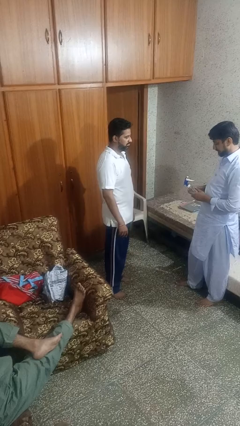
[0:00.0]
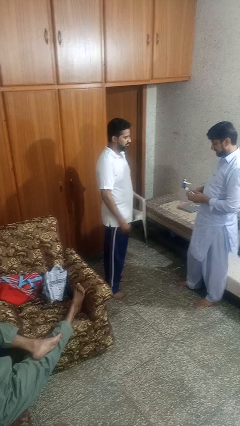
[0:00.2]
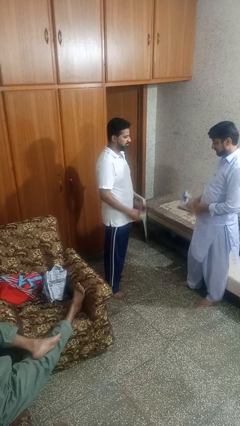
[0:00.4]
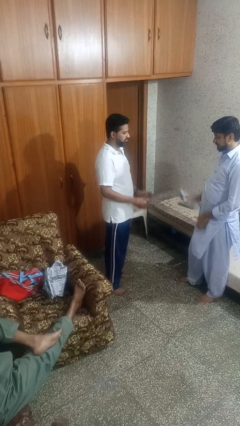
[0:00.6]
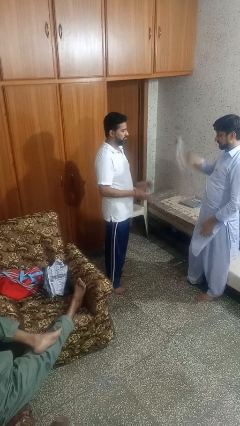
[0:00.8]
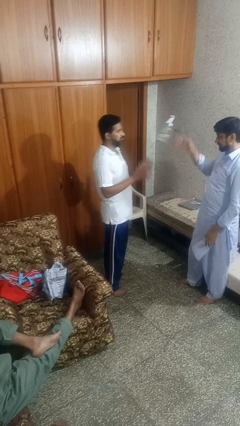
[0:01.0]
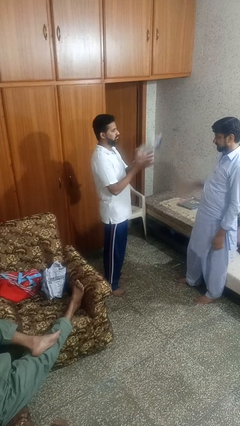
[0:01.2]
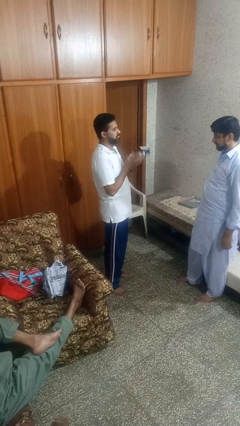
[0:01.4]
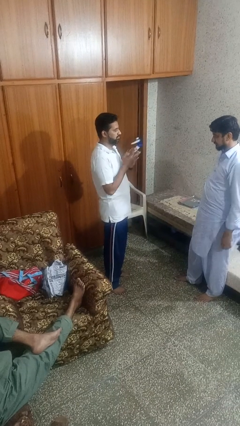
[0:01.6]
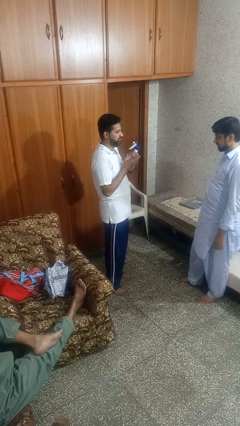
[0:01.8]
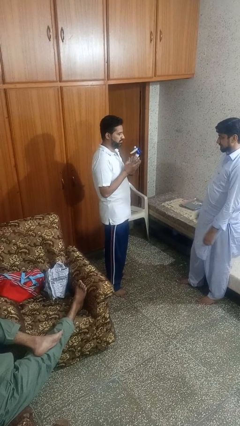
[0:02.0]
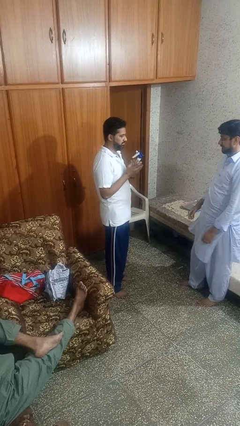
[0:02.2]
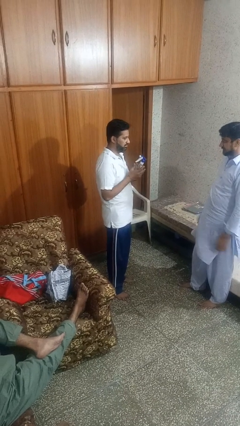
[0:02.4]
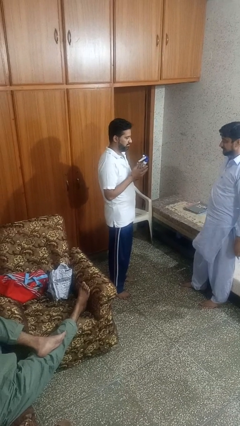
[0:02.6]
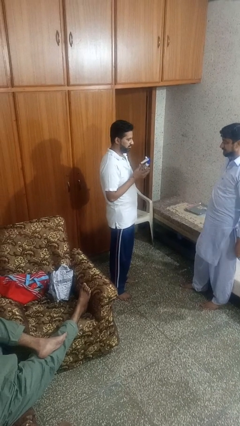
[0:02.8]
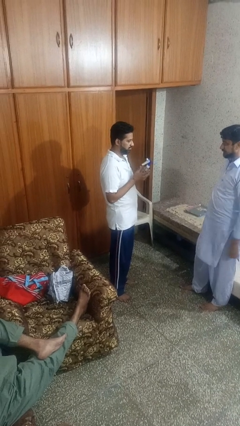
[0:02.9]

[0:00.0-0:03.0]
person catches object from person

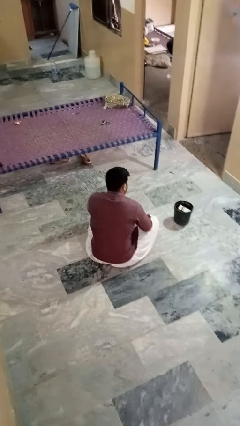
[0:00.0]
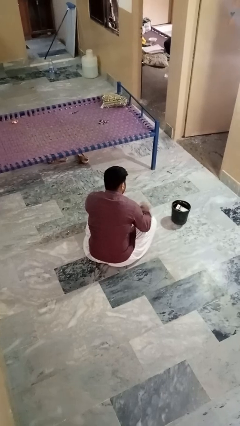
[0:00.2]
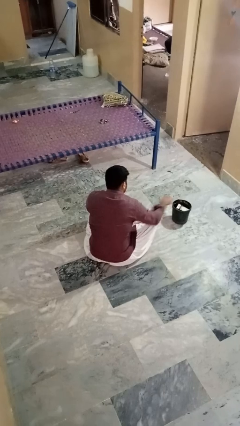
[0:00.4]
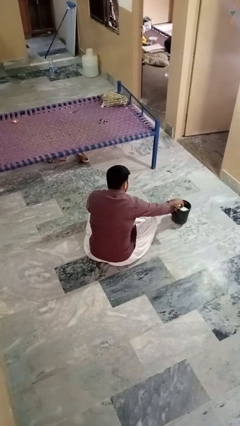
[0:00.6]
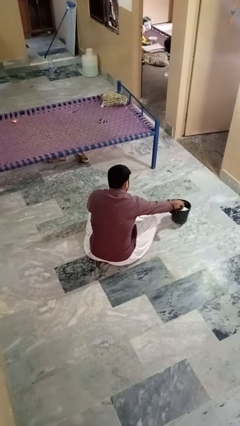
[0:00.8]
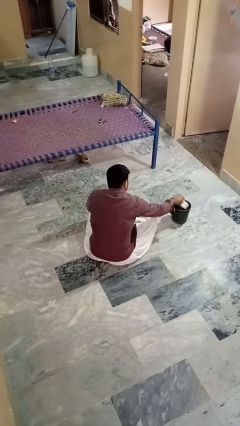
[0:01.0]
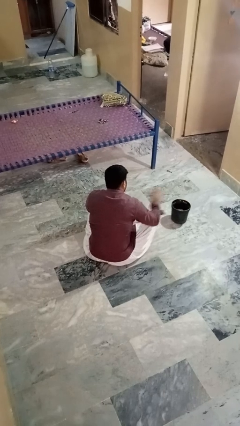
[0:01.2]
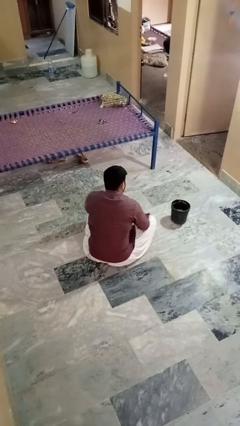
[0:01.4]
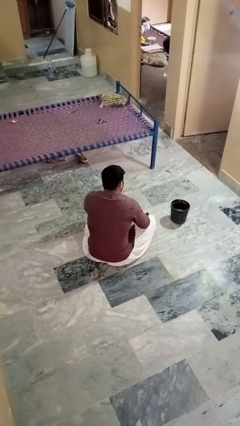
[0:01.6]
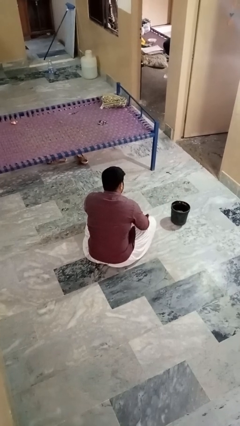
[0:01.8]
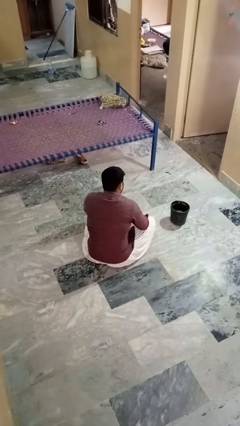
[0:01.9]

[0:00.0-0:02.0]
person takes object from basket

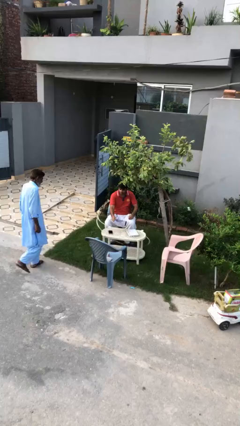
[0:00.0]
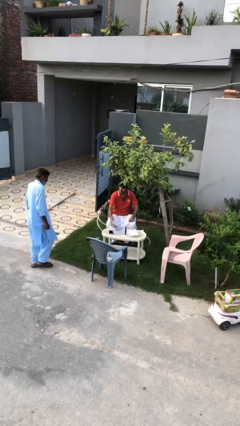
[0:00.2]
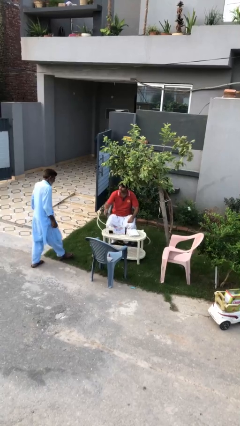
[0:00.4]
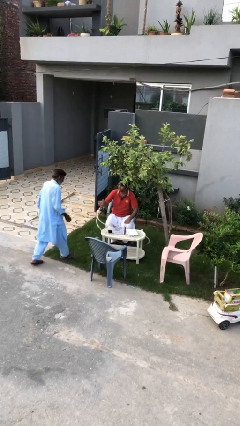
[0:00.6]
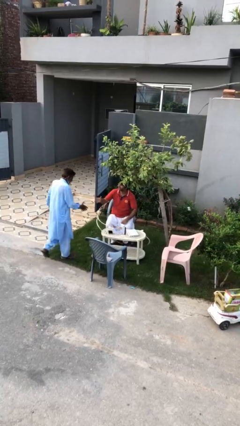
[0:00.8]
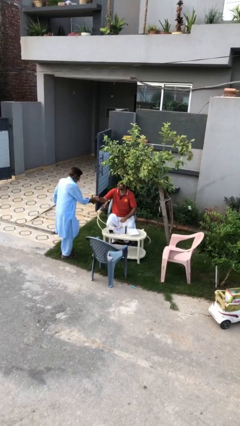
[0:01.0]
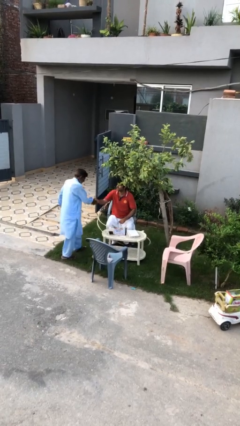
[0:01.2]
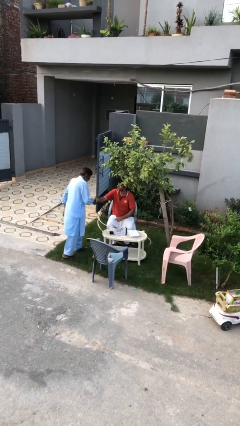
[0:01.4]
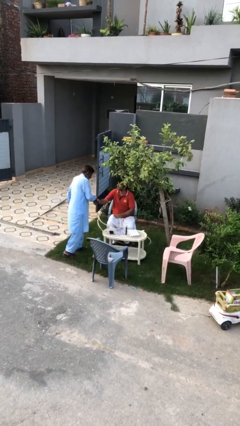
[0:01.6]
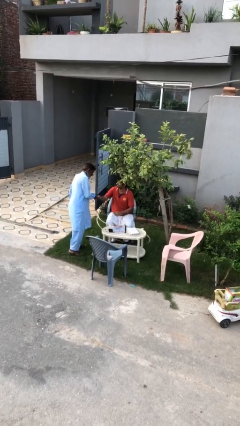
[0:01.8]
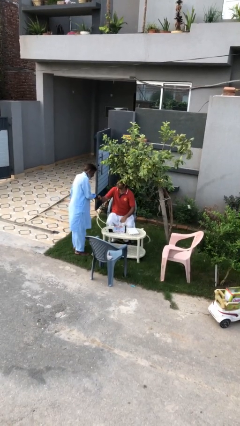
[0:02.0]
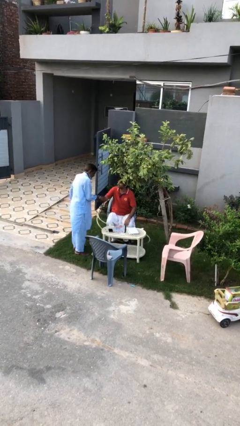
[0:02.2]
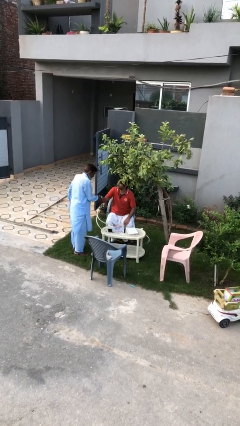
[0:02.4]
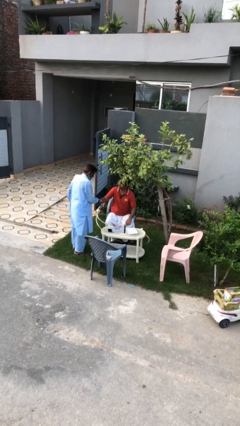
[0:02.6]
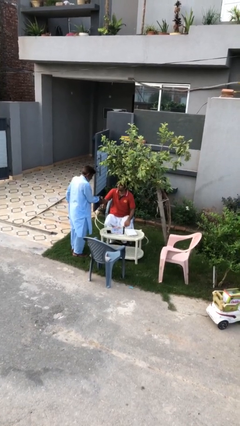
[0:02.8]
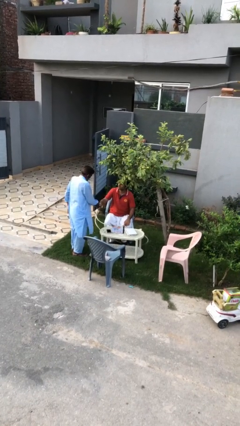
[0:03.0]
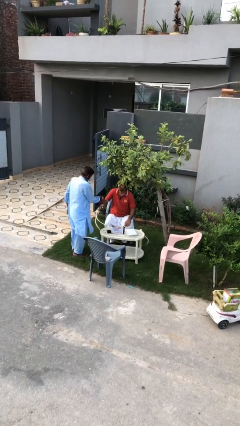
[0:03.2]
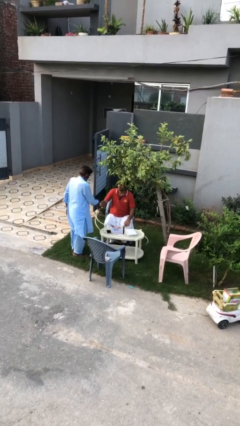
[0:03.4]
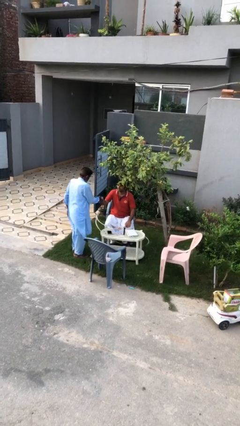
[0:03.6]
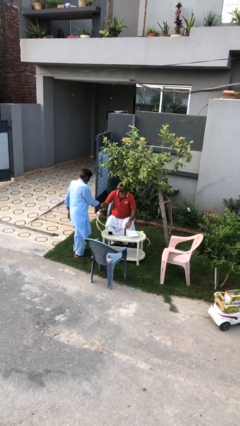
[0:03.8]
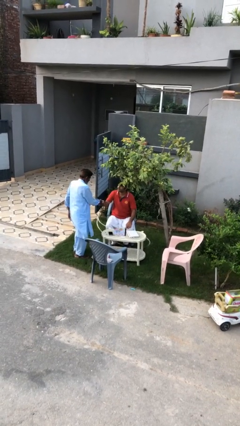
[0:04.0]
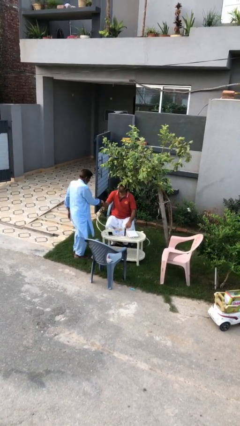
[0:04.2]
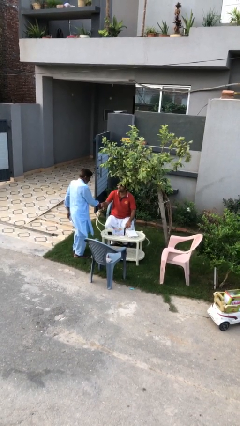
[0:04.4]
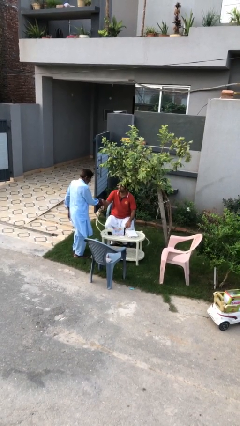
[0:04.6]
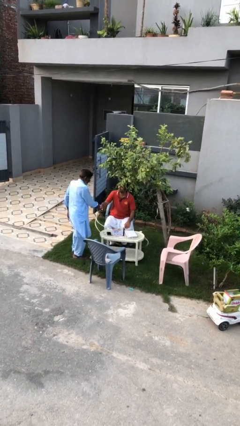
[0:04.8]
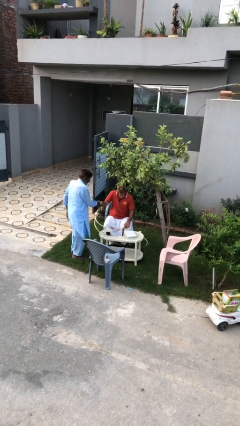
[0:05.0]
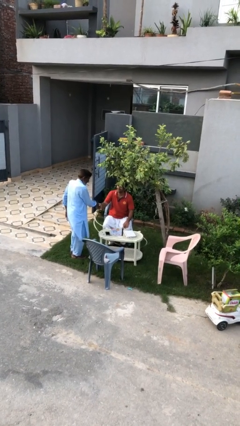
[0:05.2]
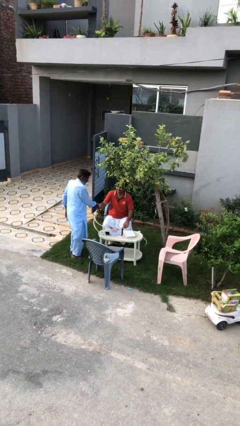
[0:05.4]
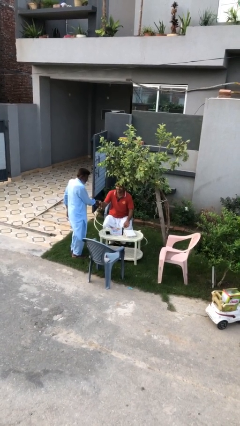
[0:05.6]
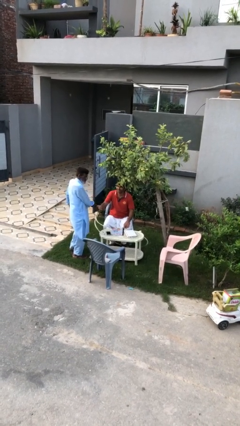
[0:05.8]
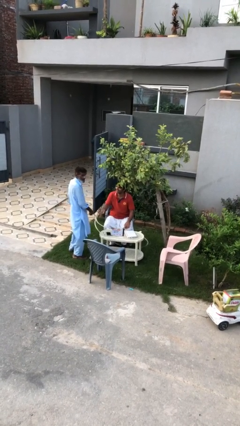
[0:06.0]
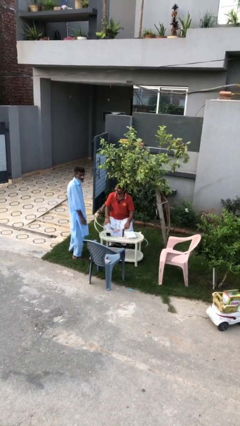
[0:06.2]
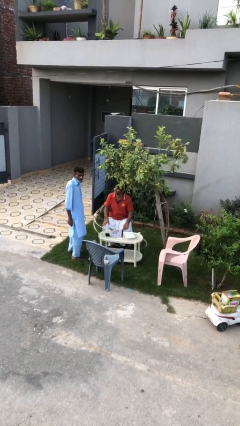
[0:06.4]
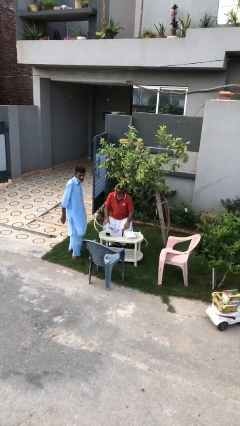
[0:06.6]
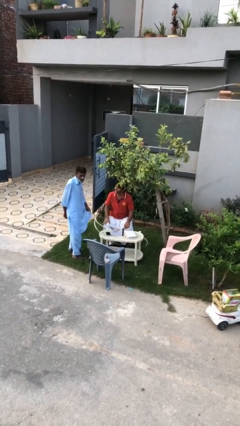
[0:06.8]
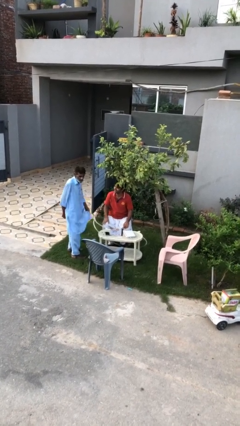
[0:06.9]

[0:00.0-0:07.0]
person shakes hand

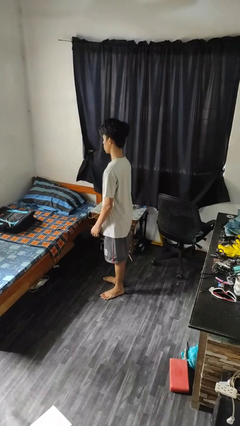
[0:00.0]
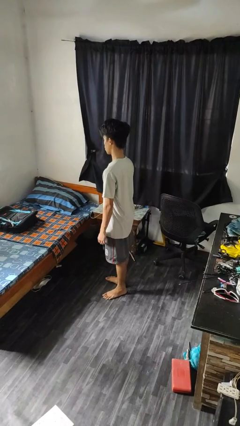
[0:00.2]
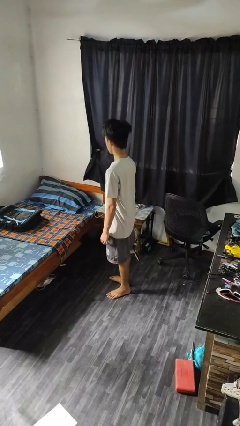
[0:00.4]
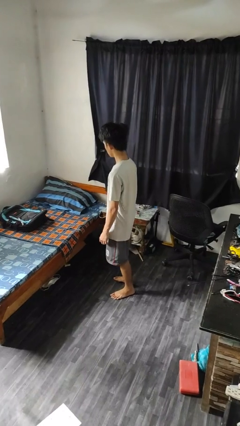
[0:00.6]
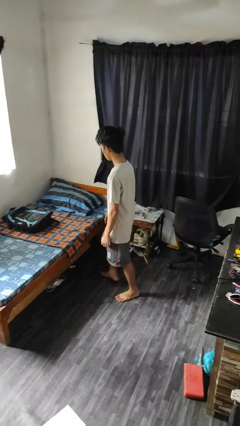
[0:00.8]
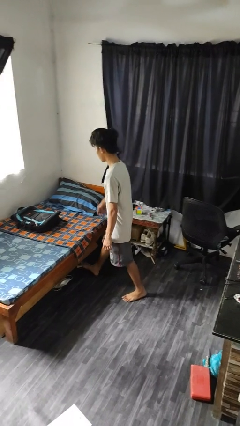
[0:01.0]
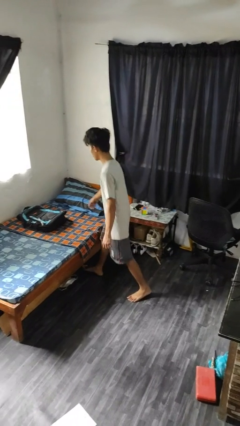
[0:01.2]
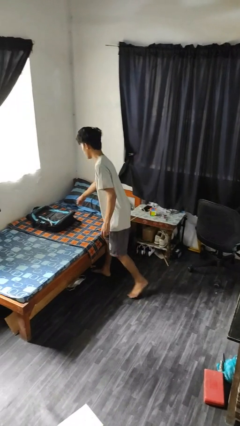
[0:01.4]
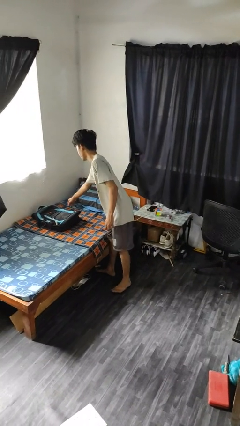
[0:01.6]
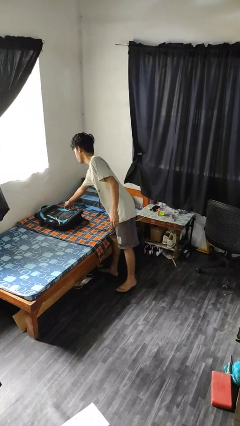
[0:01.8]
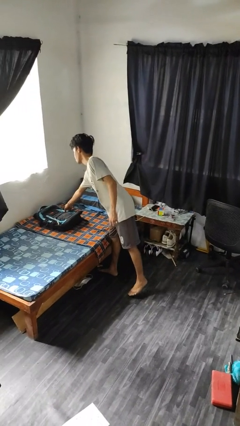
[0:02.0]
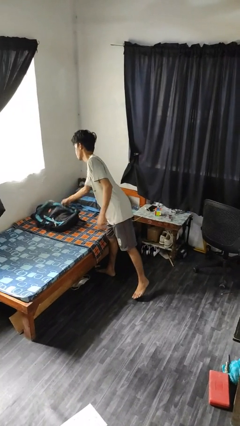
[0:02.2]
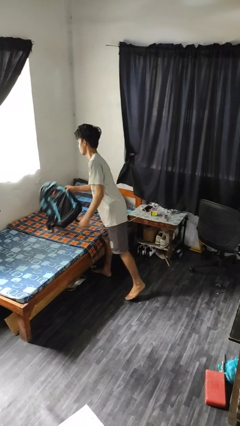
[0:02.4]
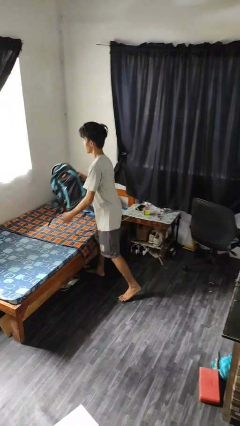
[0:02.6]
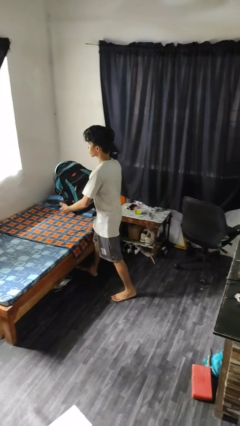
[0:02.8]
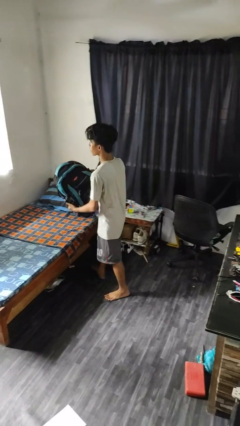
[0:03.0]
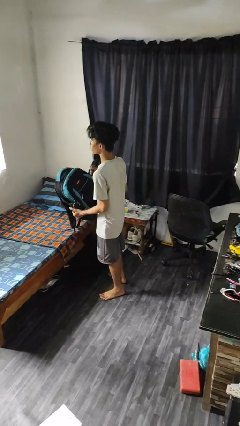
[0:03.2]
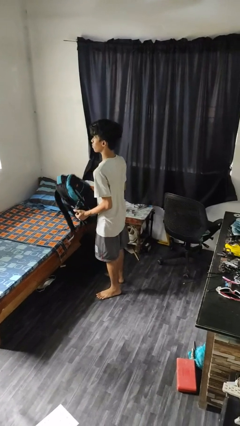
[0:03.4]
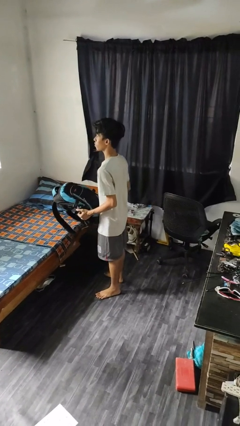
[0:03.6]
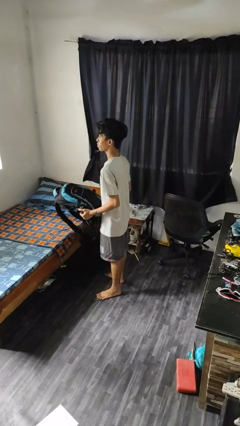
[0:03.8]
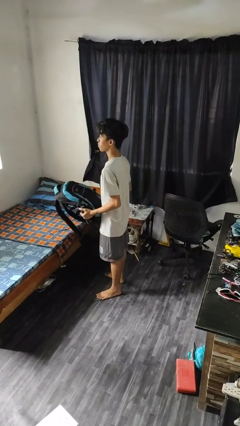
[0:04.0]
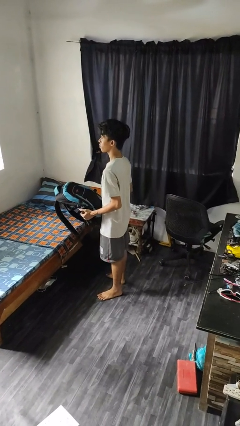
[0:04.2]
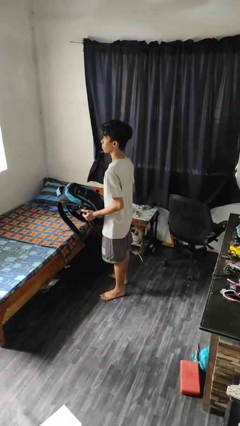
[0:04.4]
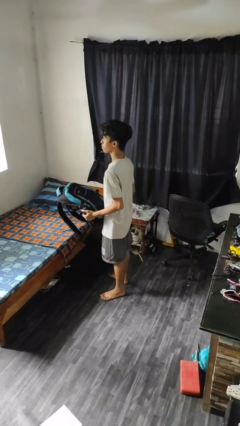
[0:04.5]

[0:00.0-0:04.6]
person picks up object from bed

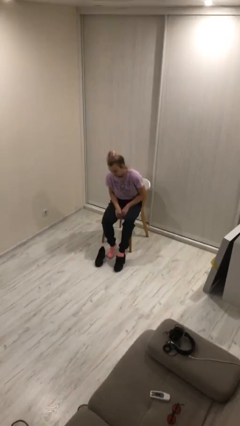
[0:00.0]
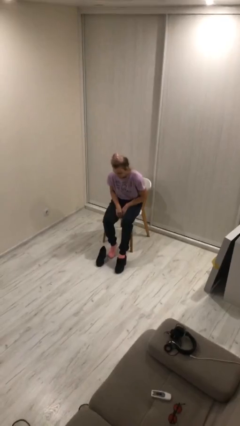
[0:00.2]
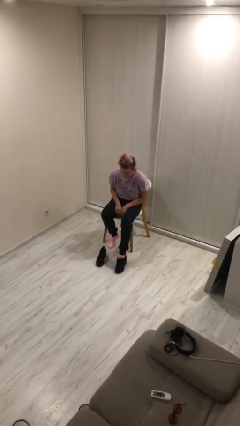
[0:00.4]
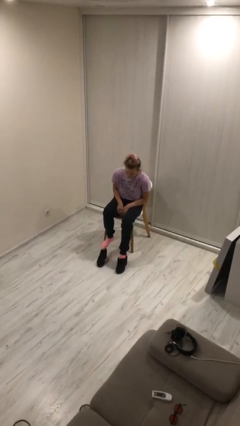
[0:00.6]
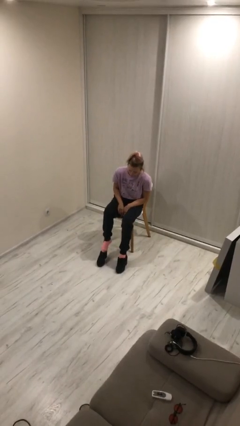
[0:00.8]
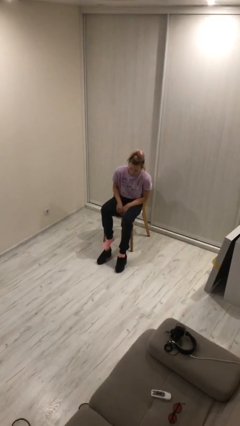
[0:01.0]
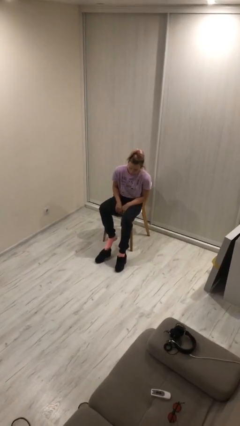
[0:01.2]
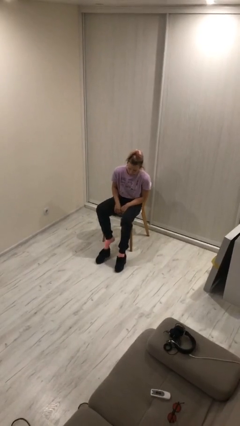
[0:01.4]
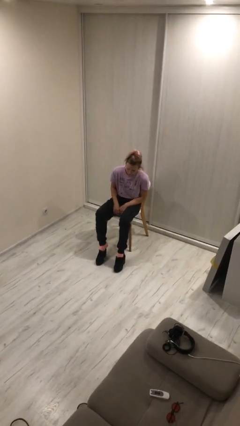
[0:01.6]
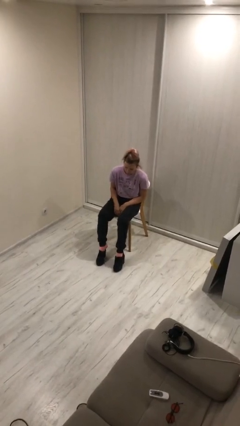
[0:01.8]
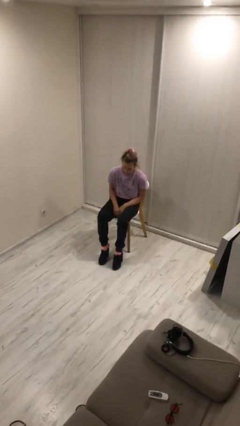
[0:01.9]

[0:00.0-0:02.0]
person puts on shoes
